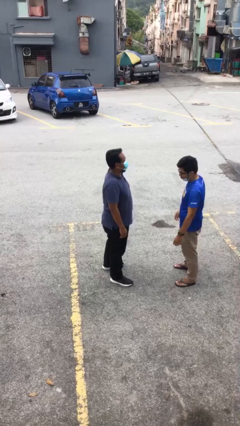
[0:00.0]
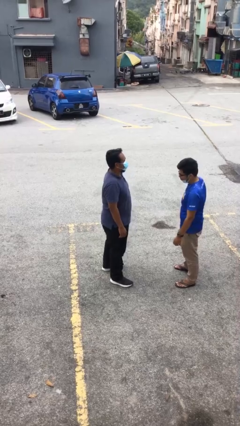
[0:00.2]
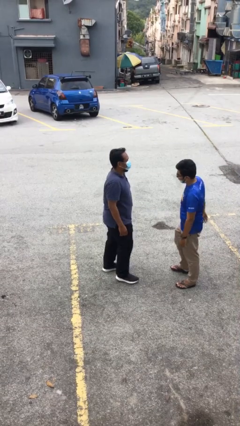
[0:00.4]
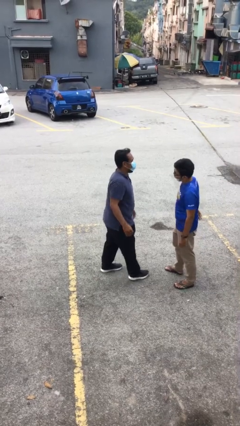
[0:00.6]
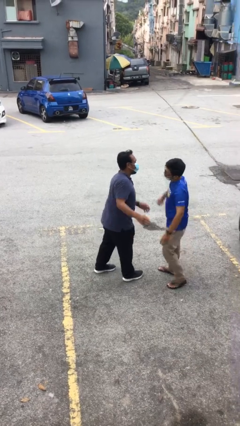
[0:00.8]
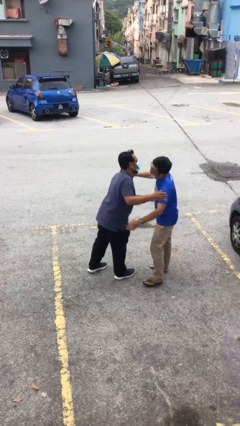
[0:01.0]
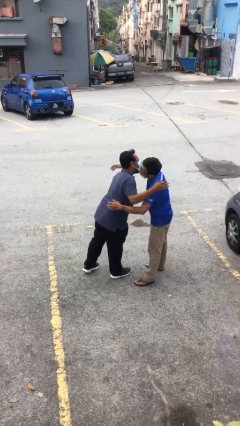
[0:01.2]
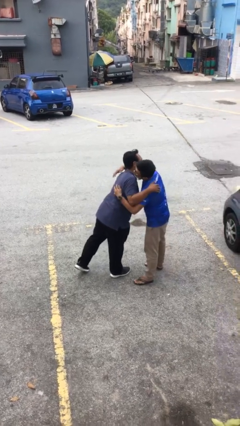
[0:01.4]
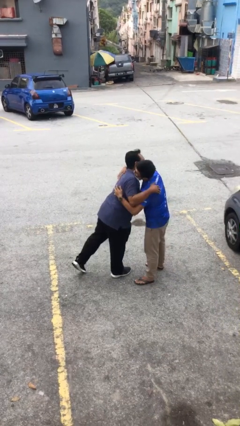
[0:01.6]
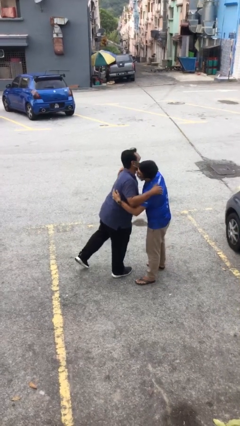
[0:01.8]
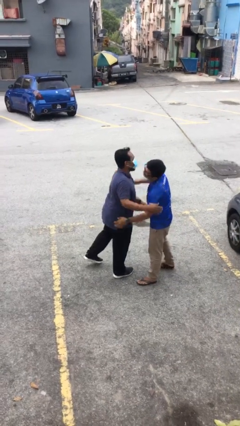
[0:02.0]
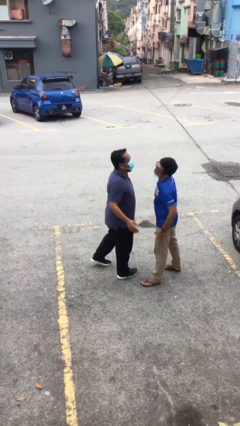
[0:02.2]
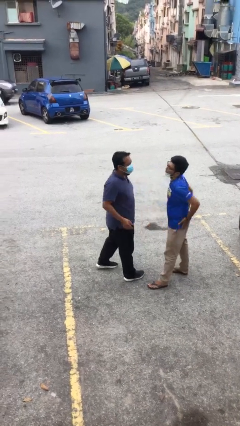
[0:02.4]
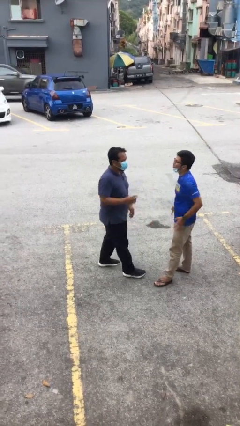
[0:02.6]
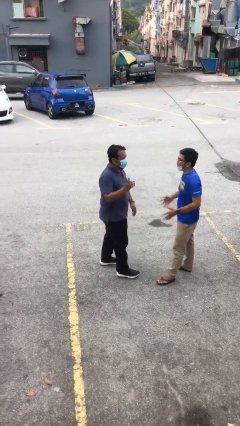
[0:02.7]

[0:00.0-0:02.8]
person embraces person

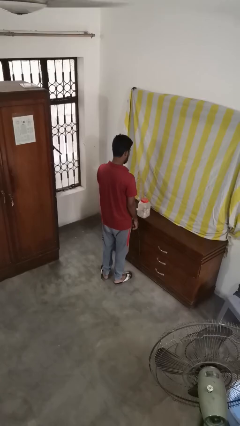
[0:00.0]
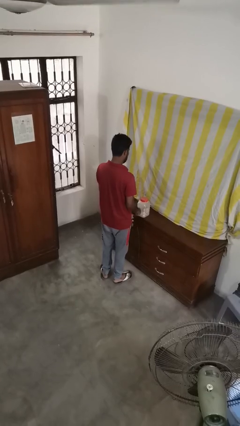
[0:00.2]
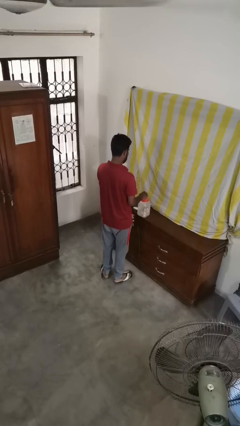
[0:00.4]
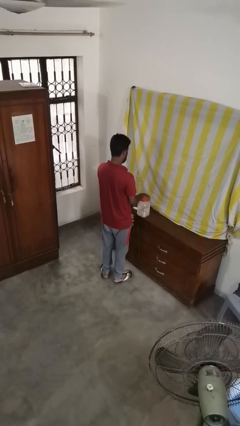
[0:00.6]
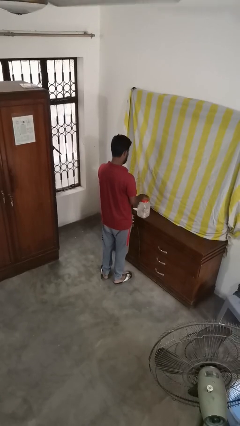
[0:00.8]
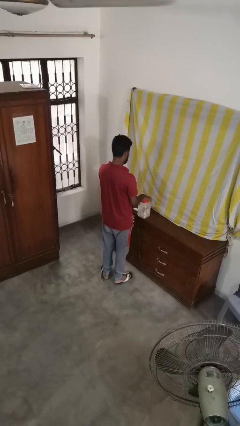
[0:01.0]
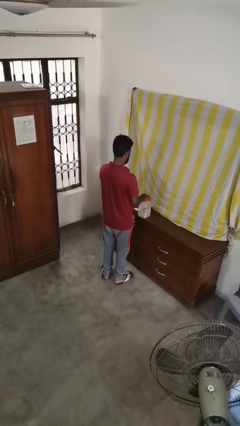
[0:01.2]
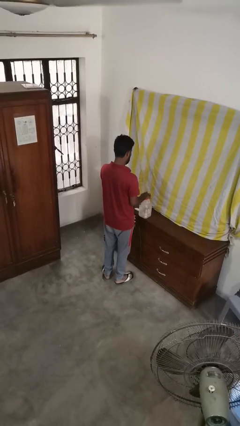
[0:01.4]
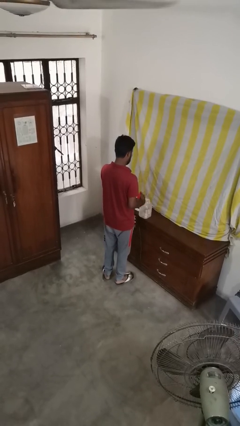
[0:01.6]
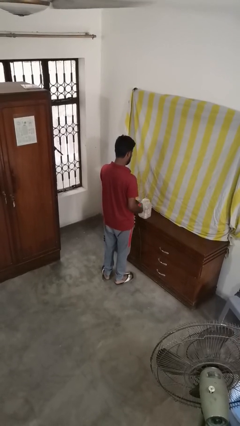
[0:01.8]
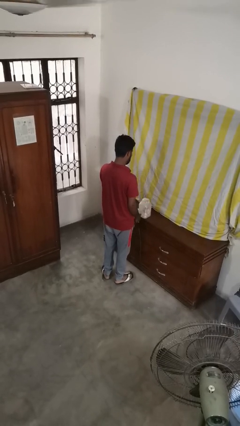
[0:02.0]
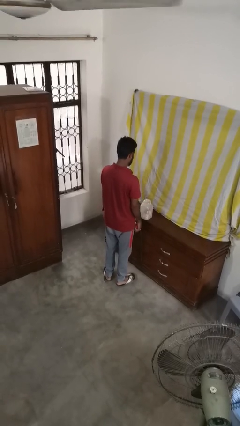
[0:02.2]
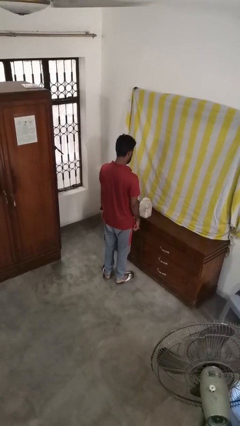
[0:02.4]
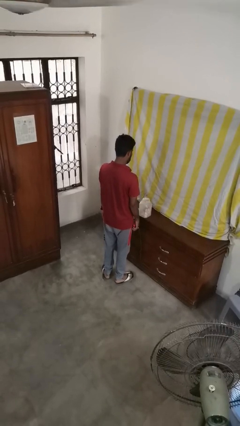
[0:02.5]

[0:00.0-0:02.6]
person opens jar

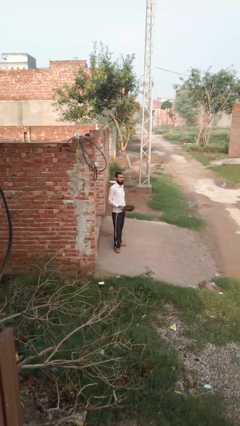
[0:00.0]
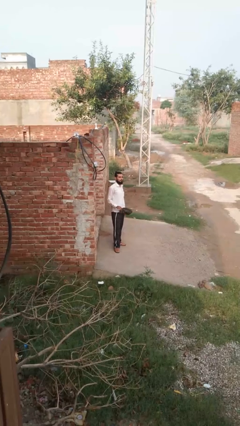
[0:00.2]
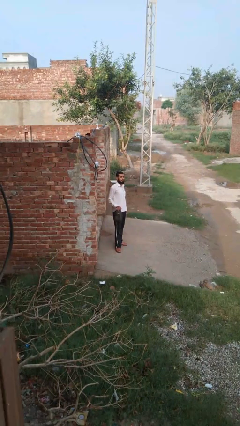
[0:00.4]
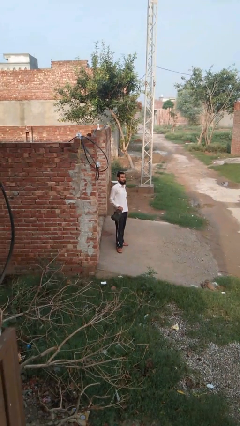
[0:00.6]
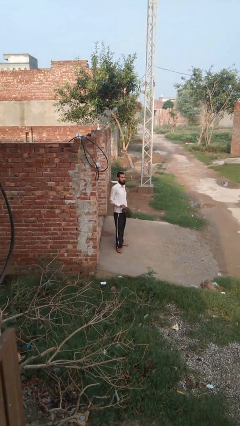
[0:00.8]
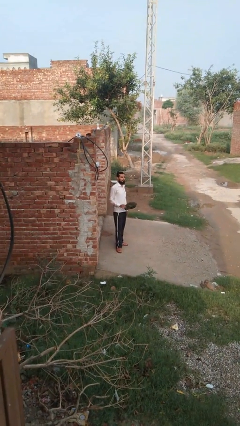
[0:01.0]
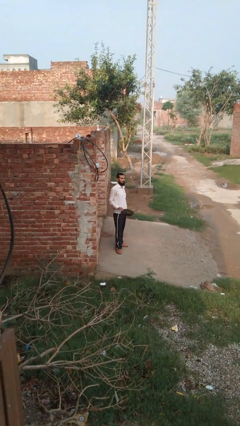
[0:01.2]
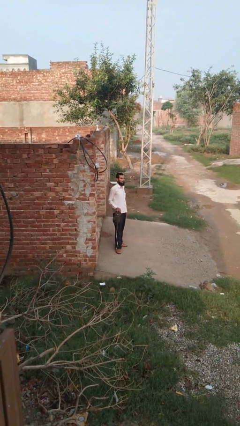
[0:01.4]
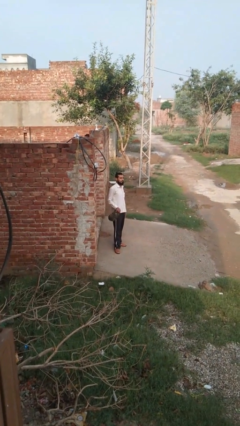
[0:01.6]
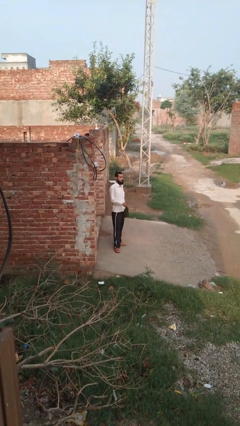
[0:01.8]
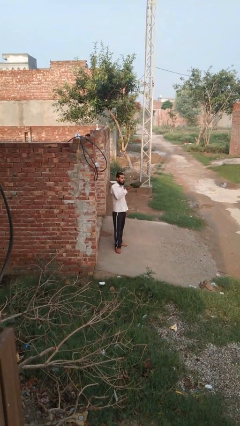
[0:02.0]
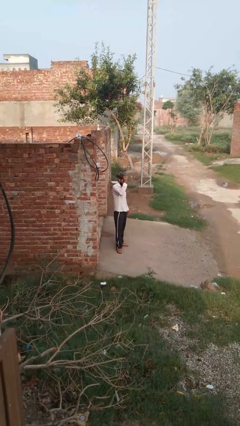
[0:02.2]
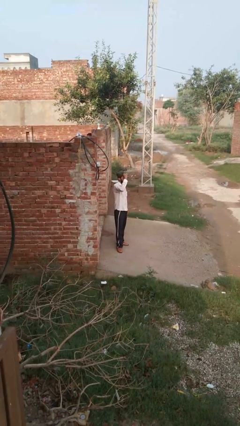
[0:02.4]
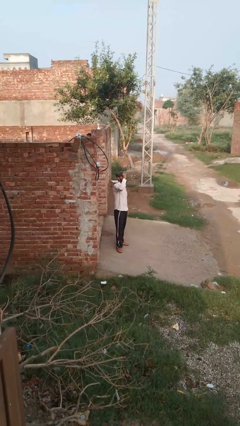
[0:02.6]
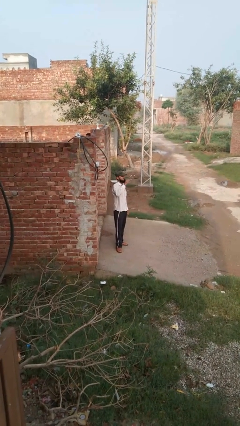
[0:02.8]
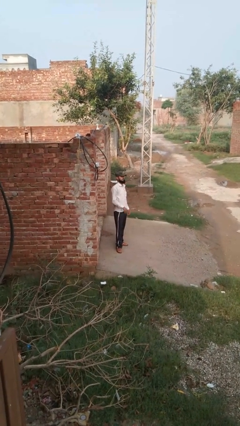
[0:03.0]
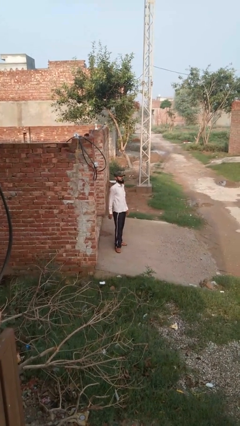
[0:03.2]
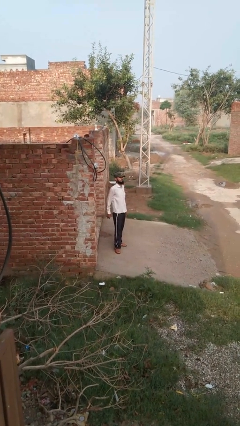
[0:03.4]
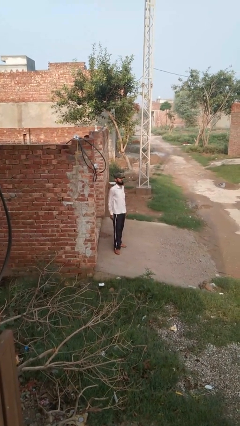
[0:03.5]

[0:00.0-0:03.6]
person puts on hat

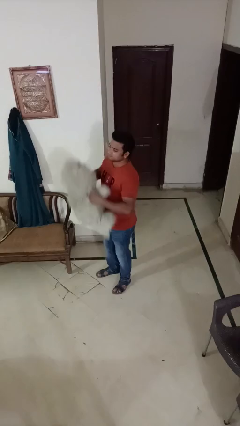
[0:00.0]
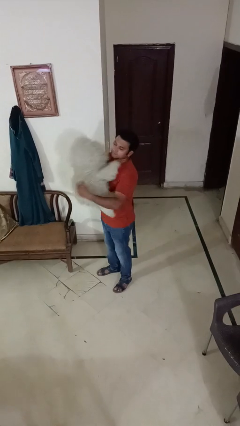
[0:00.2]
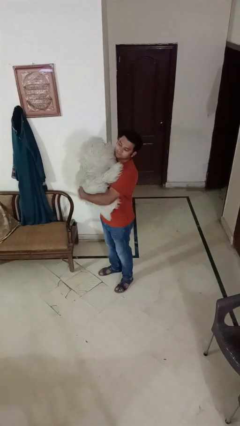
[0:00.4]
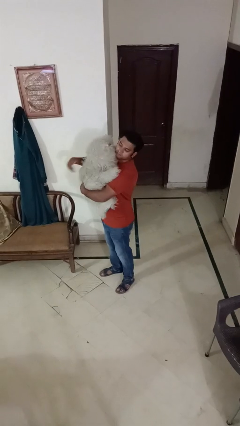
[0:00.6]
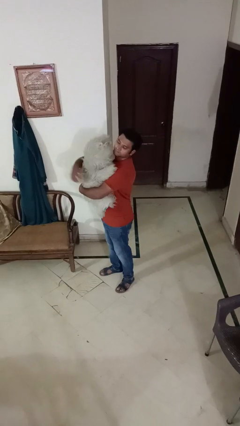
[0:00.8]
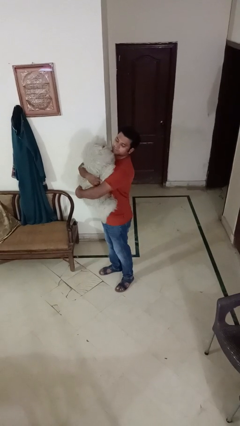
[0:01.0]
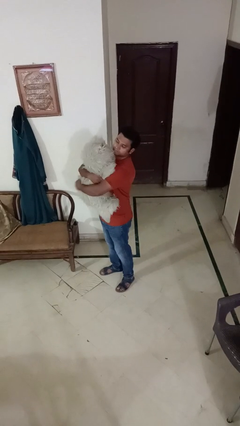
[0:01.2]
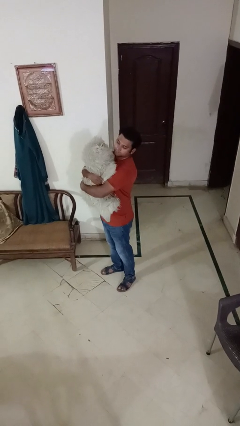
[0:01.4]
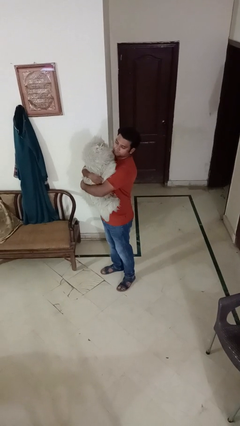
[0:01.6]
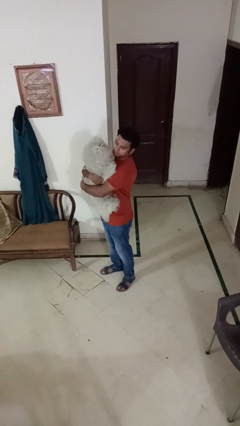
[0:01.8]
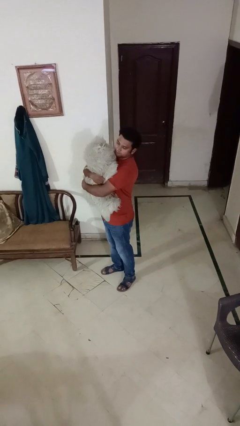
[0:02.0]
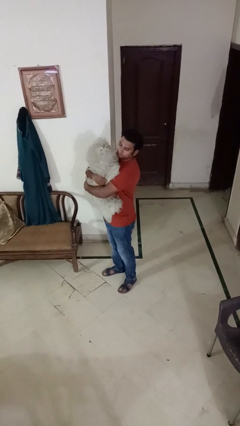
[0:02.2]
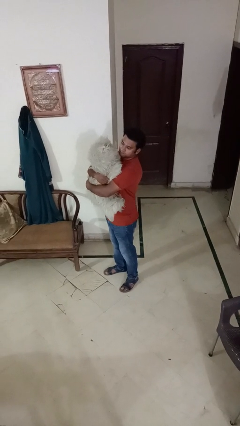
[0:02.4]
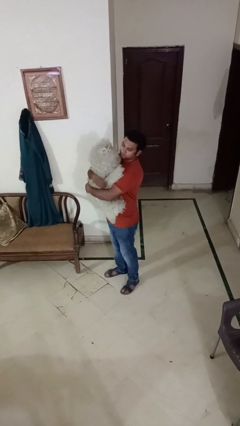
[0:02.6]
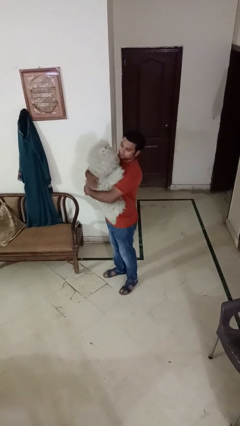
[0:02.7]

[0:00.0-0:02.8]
person hugs stuffed animal

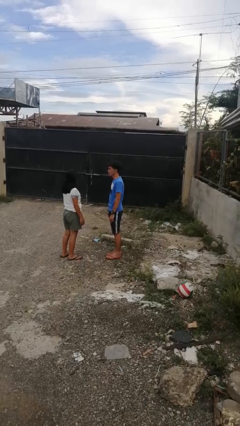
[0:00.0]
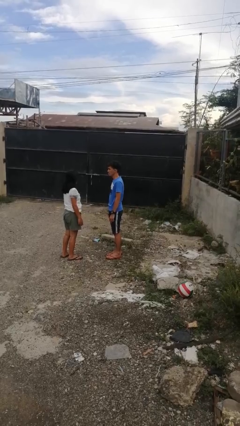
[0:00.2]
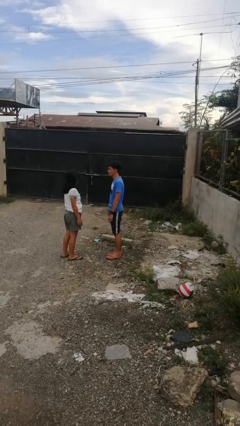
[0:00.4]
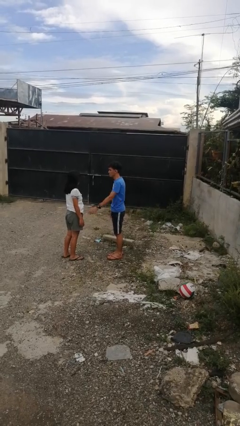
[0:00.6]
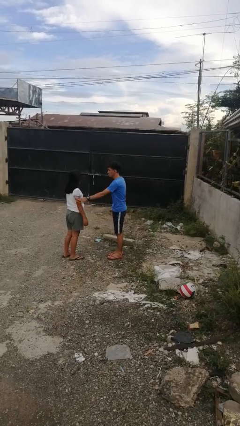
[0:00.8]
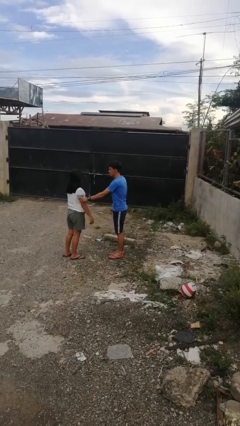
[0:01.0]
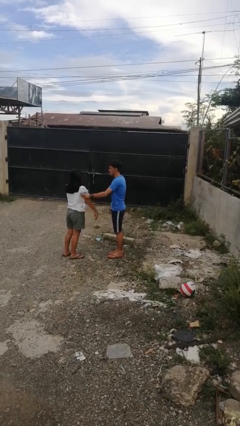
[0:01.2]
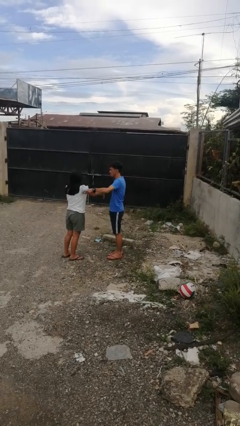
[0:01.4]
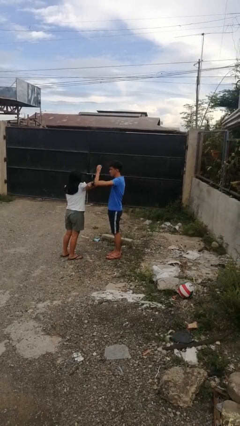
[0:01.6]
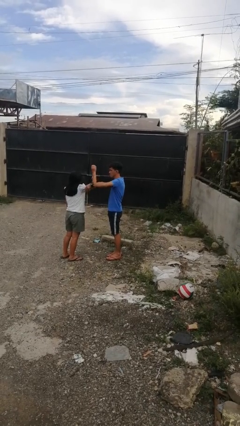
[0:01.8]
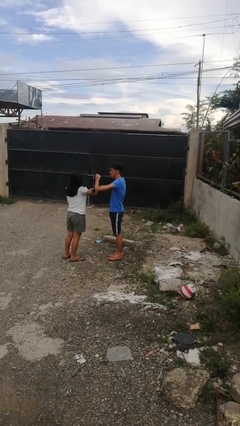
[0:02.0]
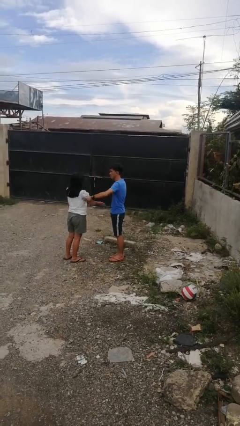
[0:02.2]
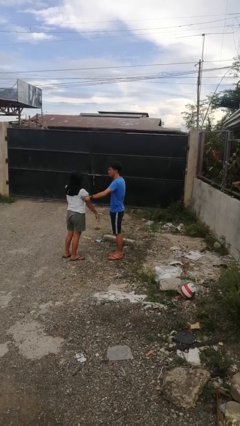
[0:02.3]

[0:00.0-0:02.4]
person grabs person by bicep

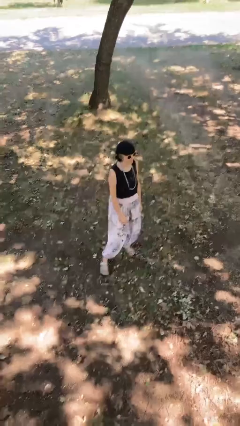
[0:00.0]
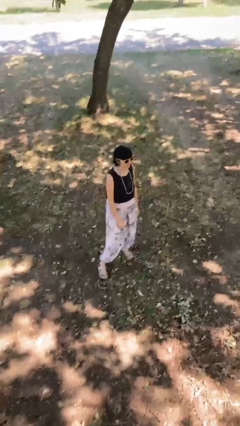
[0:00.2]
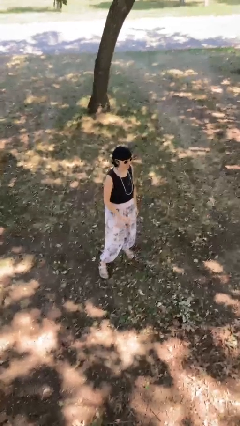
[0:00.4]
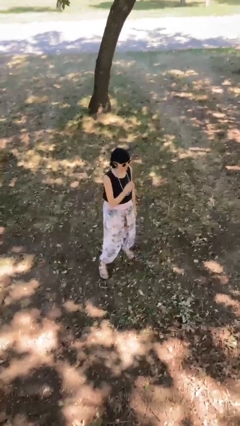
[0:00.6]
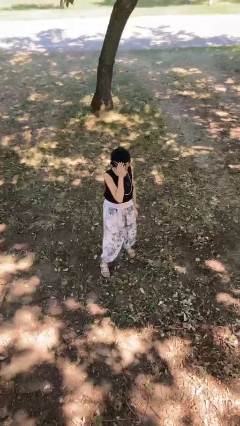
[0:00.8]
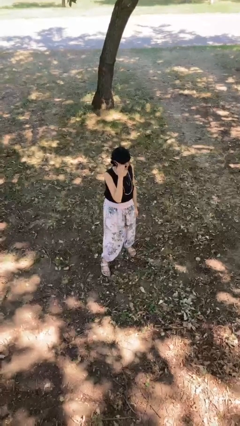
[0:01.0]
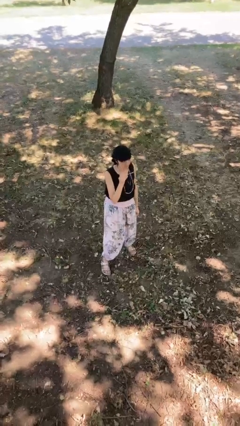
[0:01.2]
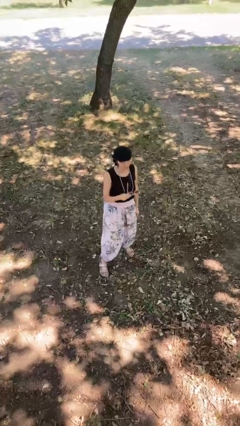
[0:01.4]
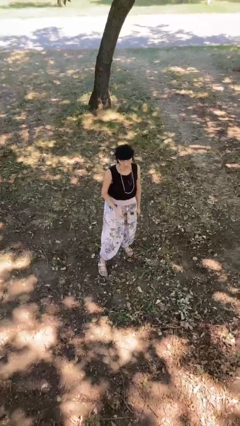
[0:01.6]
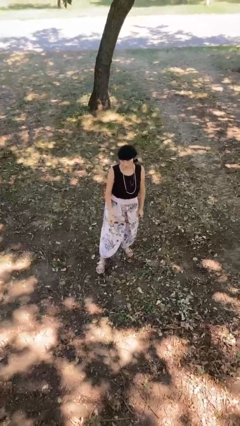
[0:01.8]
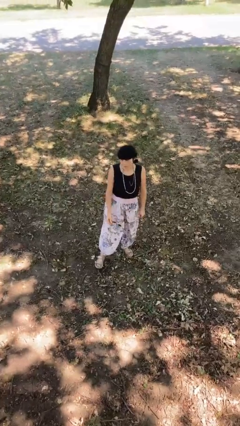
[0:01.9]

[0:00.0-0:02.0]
person takes off sunglasses

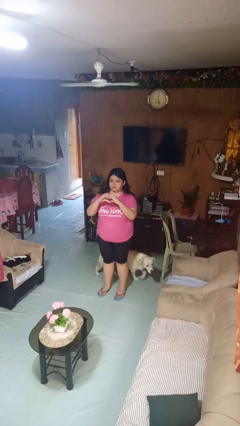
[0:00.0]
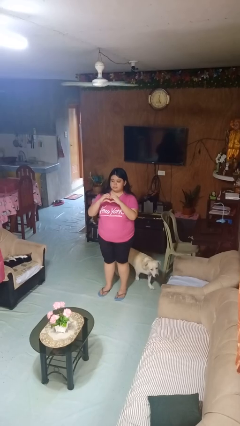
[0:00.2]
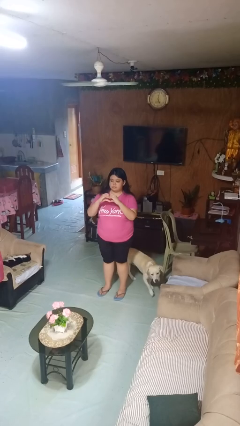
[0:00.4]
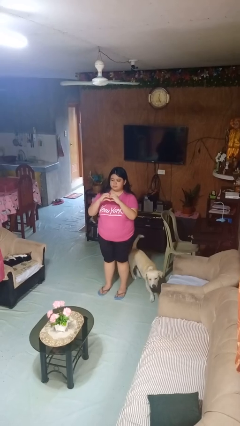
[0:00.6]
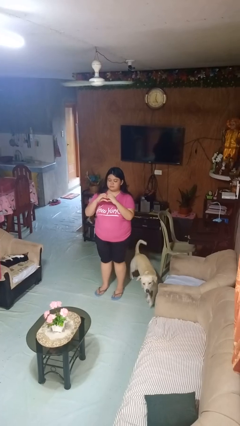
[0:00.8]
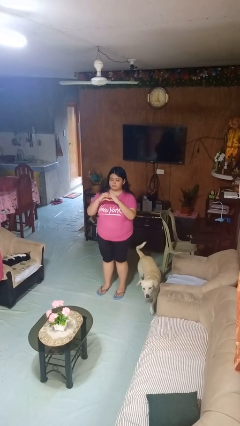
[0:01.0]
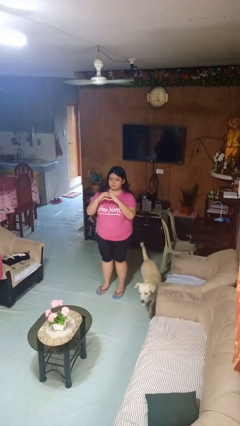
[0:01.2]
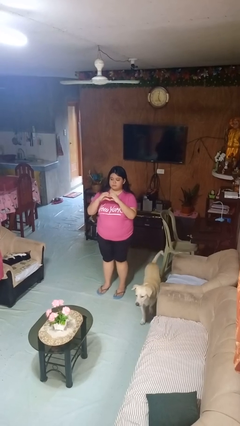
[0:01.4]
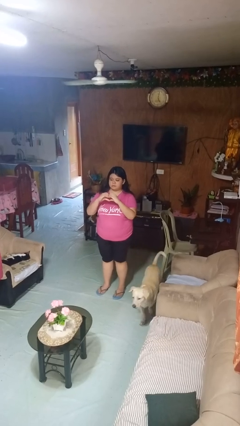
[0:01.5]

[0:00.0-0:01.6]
person gestures heart
